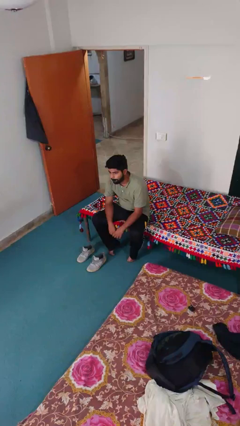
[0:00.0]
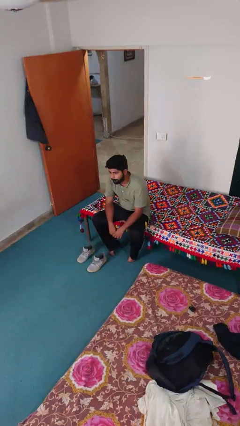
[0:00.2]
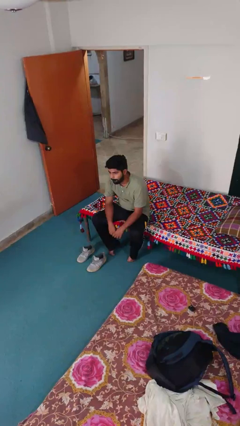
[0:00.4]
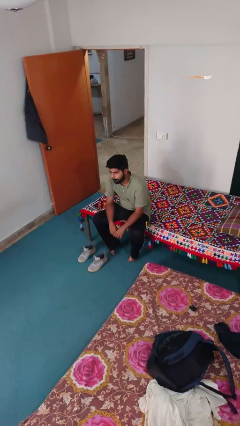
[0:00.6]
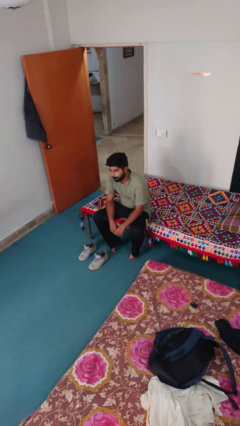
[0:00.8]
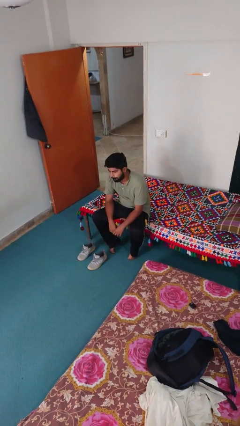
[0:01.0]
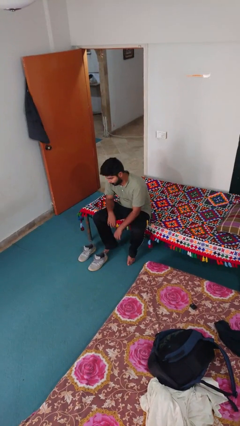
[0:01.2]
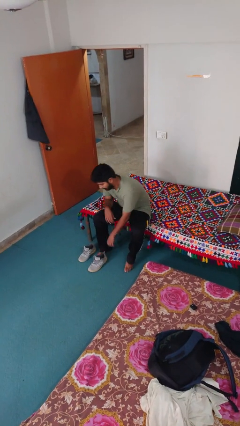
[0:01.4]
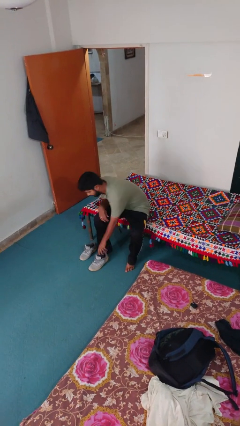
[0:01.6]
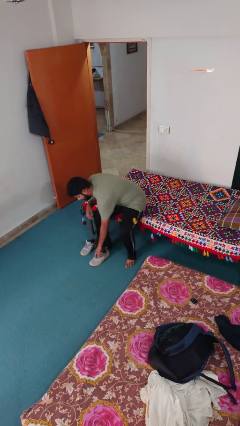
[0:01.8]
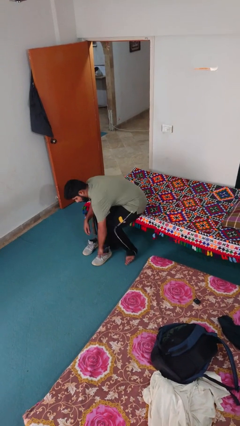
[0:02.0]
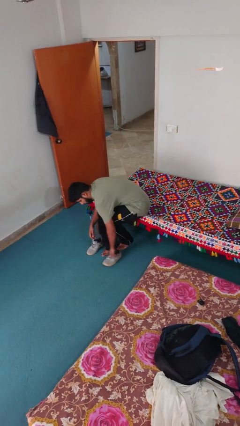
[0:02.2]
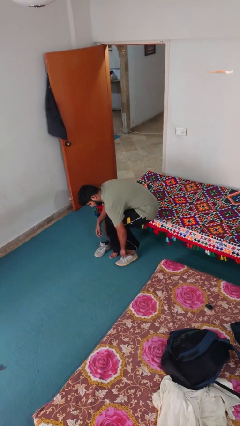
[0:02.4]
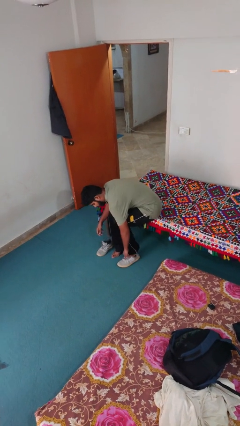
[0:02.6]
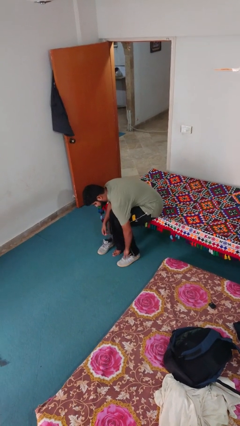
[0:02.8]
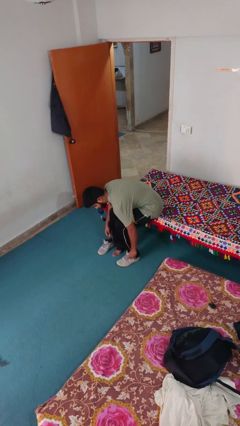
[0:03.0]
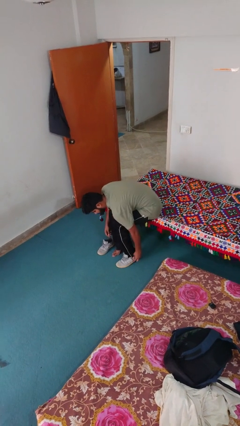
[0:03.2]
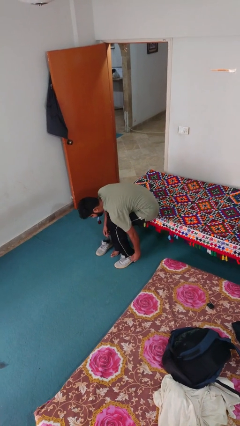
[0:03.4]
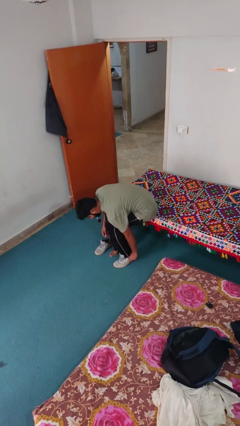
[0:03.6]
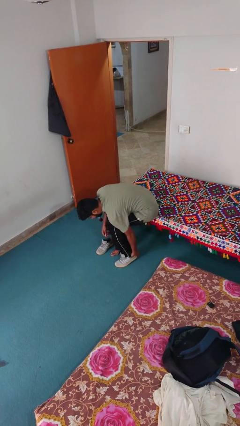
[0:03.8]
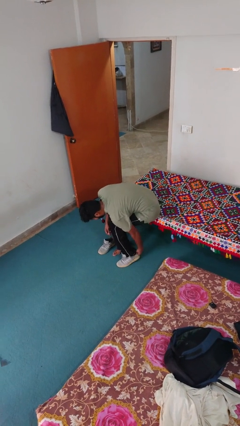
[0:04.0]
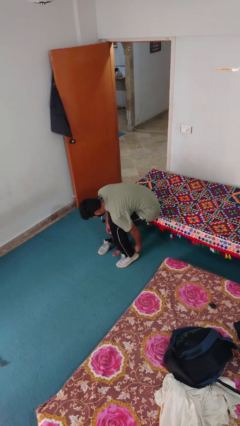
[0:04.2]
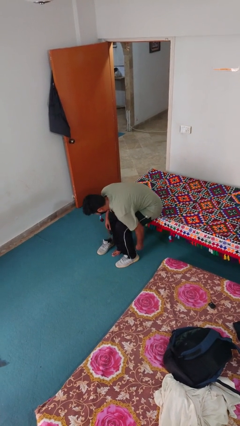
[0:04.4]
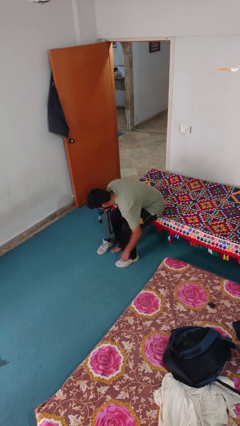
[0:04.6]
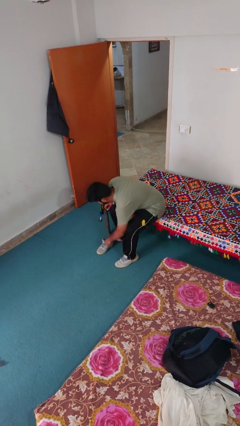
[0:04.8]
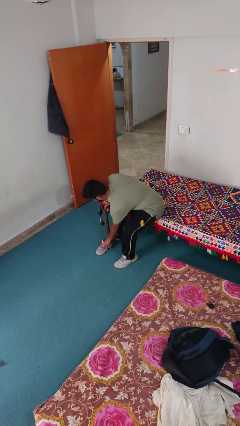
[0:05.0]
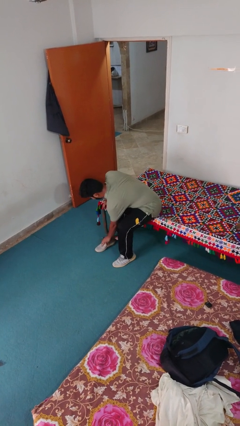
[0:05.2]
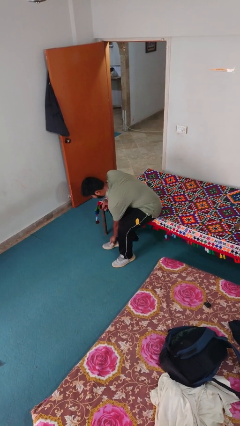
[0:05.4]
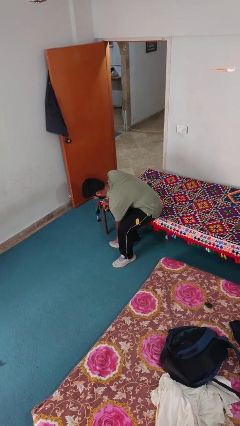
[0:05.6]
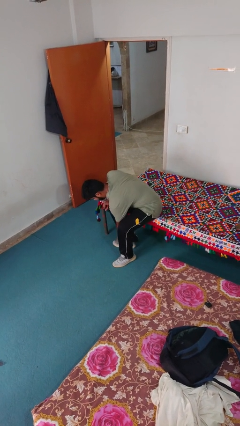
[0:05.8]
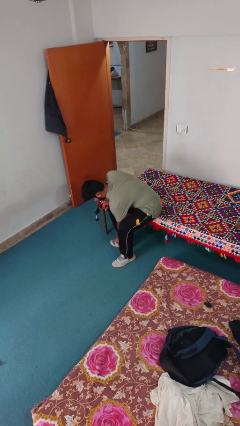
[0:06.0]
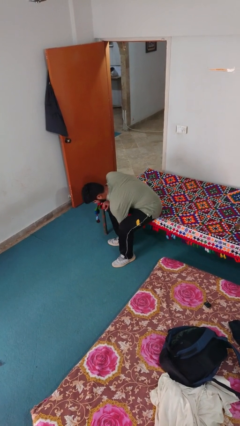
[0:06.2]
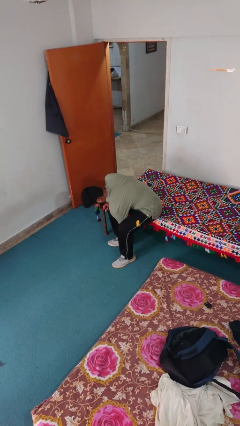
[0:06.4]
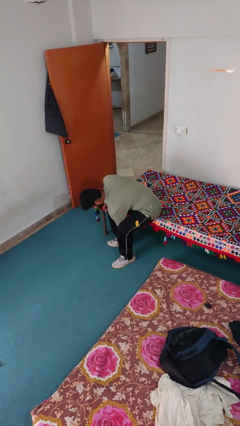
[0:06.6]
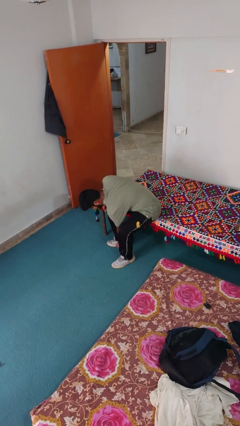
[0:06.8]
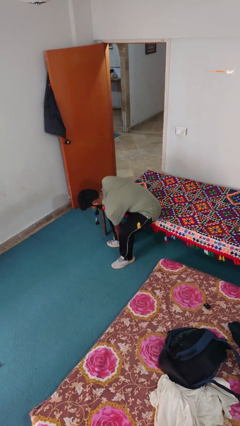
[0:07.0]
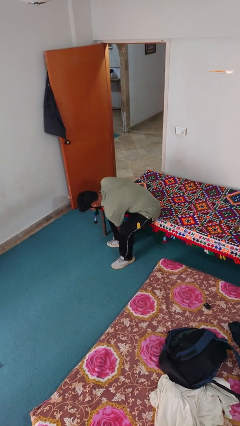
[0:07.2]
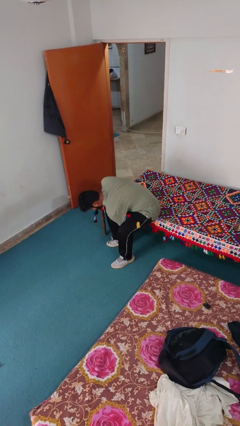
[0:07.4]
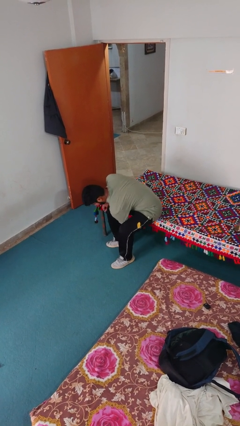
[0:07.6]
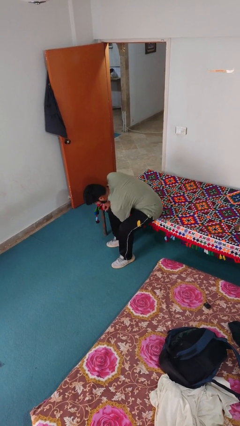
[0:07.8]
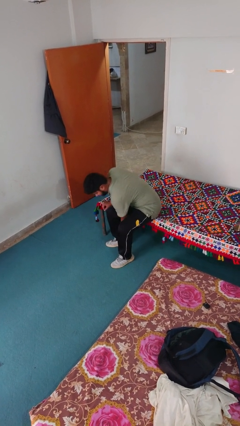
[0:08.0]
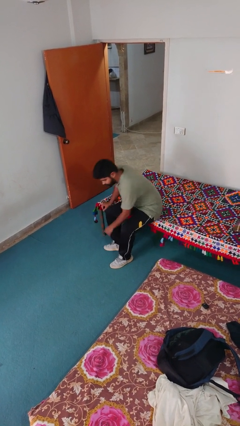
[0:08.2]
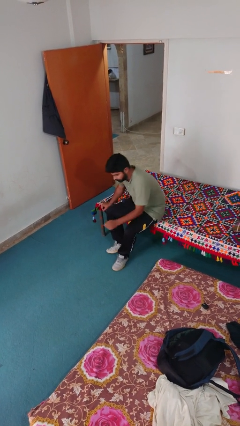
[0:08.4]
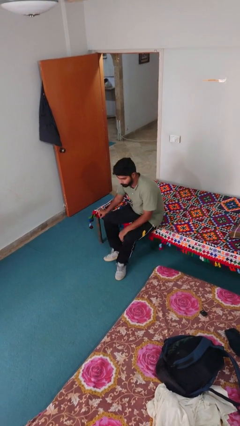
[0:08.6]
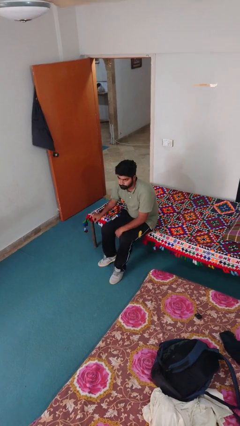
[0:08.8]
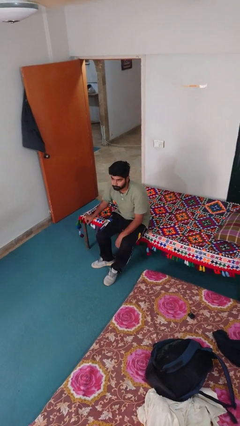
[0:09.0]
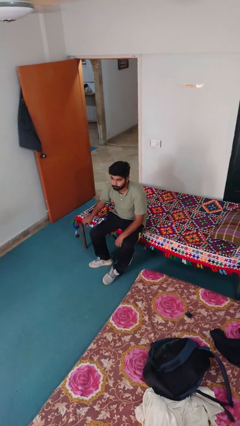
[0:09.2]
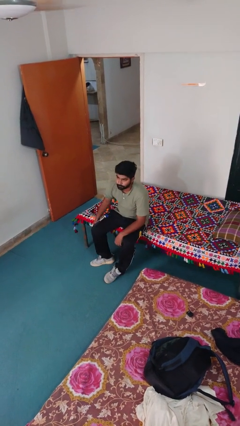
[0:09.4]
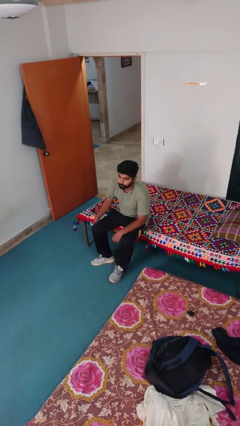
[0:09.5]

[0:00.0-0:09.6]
person puts on shoes

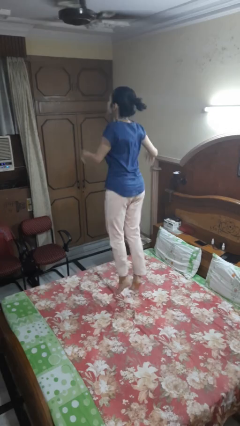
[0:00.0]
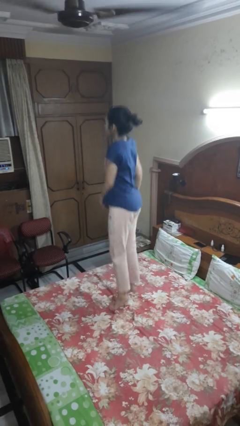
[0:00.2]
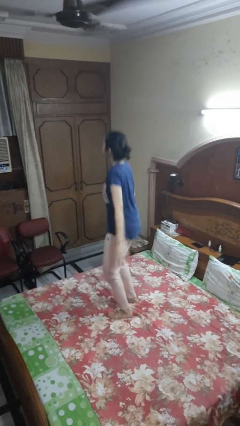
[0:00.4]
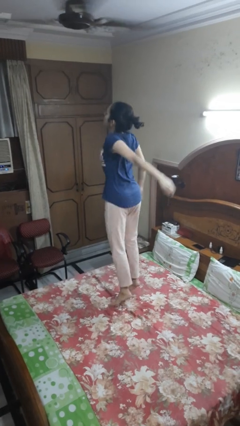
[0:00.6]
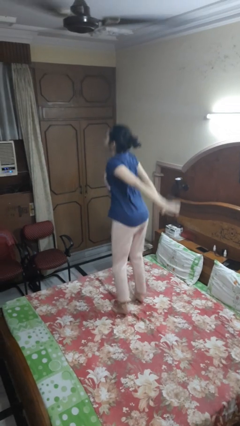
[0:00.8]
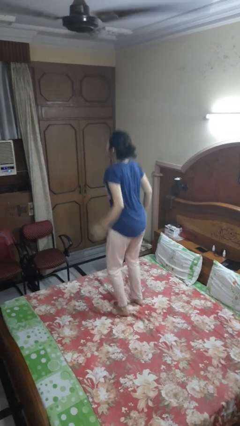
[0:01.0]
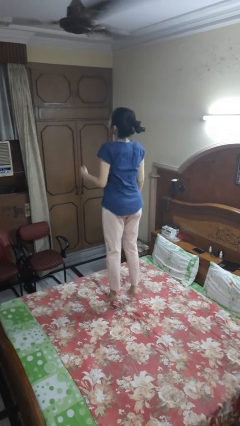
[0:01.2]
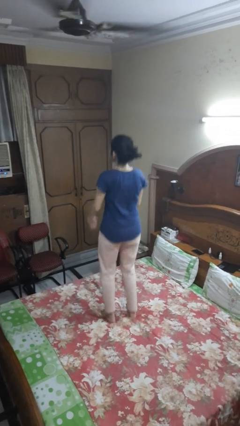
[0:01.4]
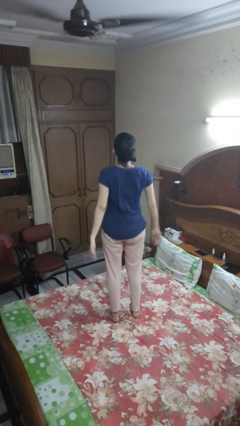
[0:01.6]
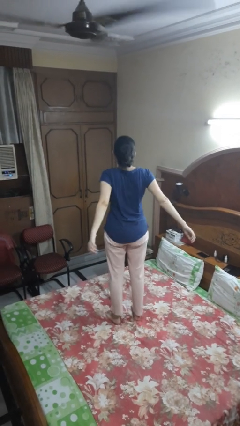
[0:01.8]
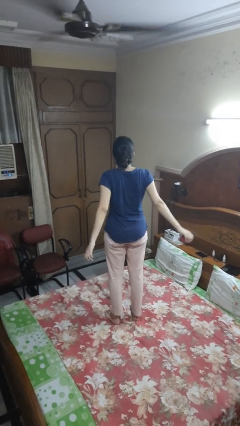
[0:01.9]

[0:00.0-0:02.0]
person jumps on bed

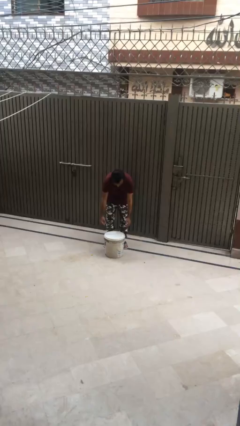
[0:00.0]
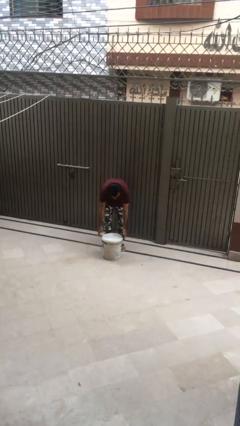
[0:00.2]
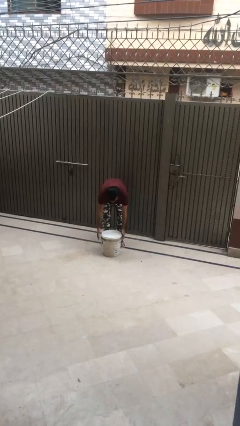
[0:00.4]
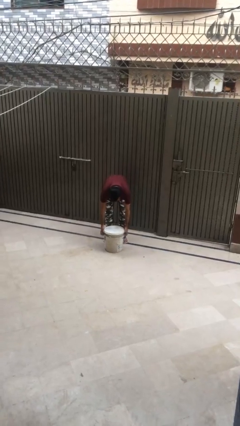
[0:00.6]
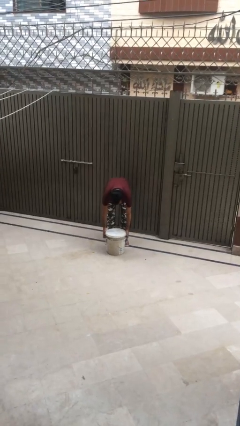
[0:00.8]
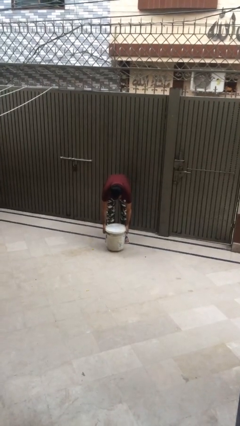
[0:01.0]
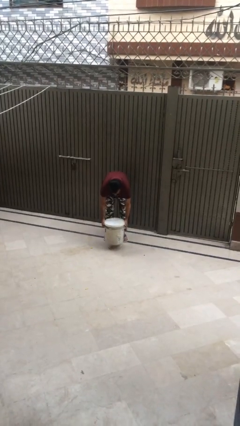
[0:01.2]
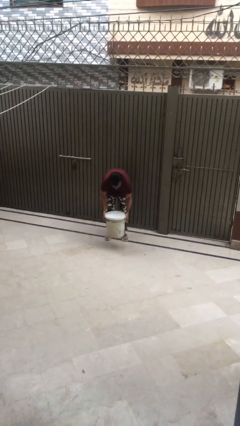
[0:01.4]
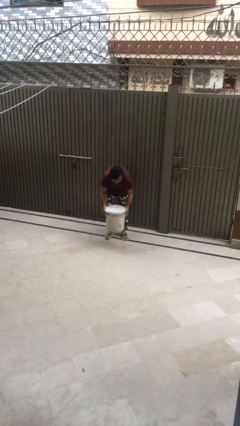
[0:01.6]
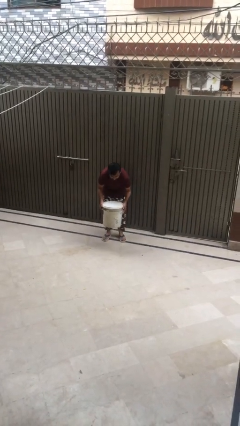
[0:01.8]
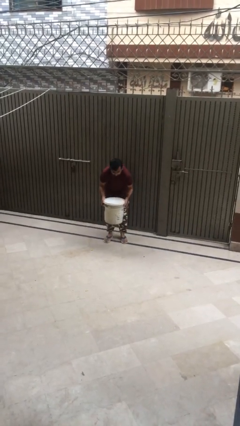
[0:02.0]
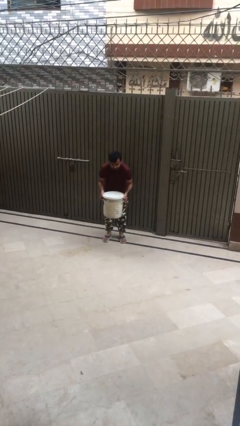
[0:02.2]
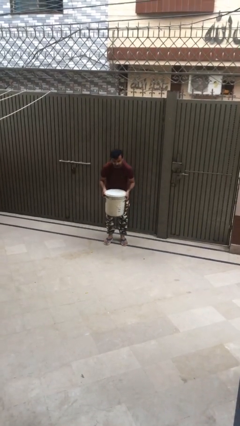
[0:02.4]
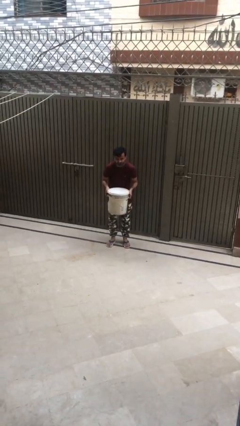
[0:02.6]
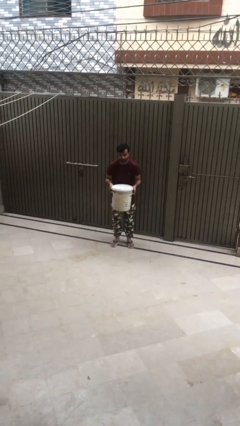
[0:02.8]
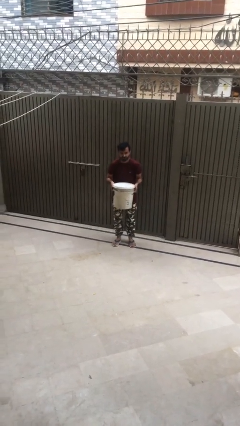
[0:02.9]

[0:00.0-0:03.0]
person picks up object from floor

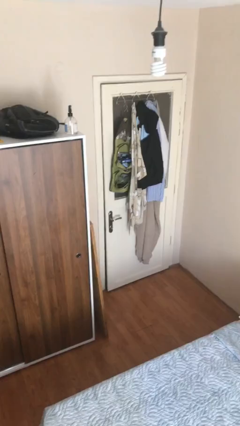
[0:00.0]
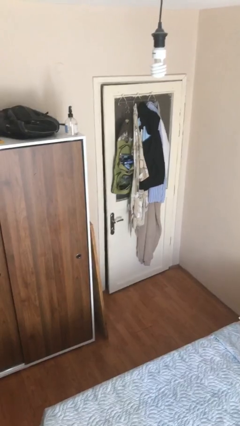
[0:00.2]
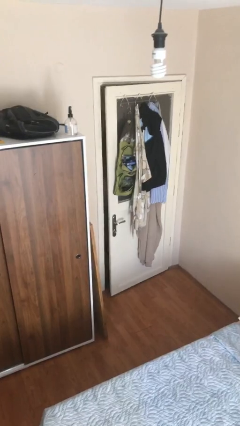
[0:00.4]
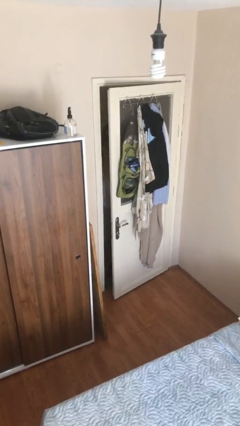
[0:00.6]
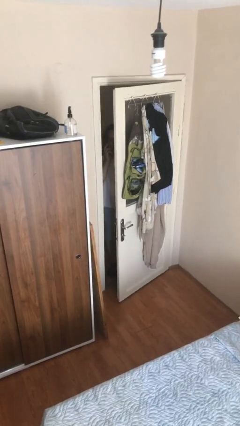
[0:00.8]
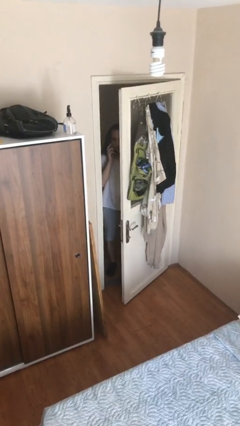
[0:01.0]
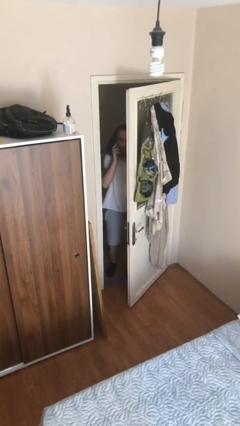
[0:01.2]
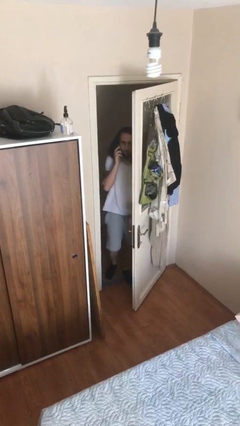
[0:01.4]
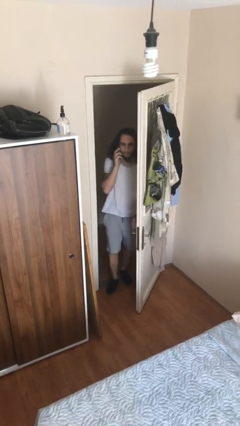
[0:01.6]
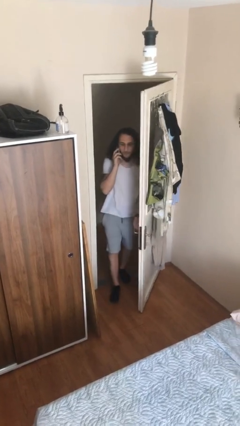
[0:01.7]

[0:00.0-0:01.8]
person opens facility door

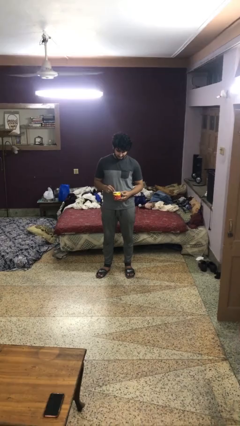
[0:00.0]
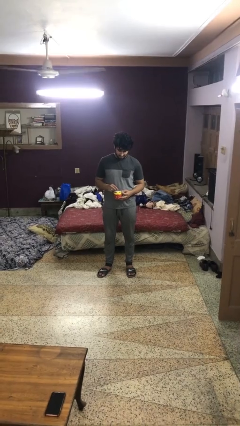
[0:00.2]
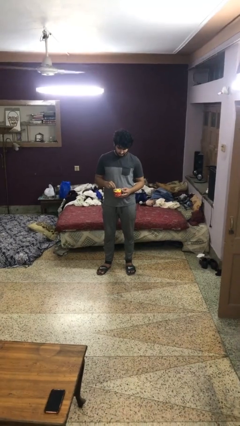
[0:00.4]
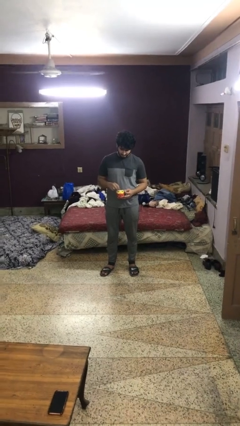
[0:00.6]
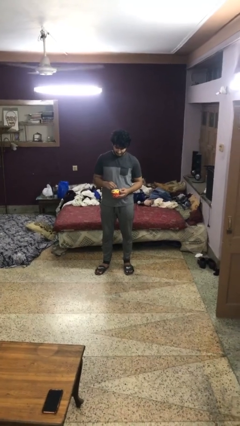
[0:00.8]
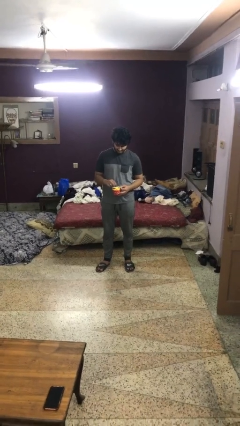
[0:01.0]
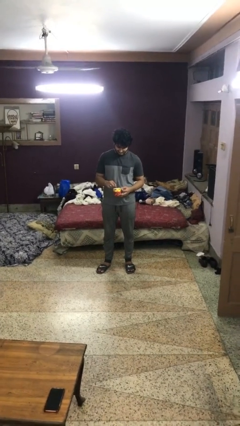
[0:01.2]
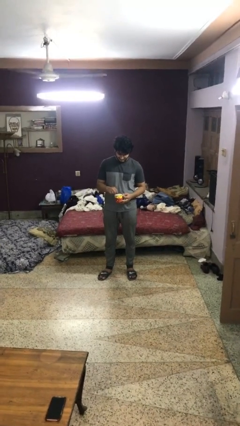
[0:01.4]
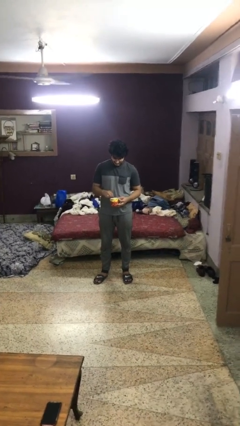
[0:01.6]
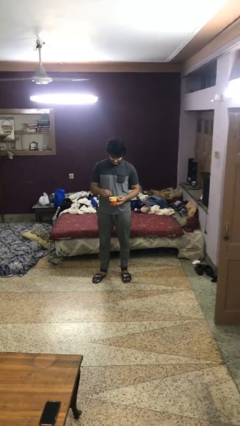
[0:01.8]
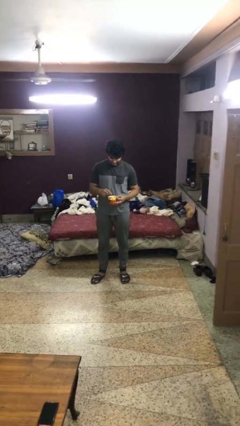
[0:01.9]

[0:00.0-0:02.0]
person stirs mug
